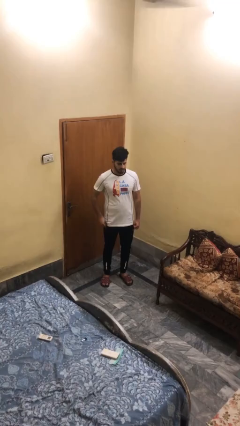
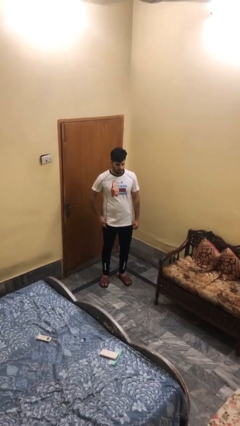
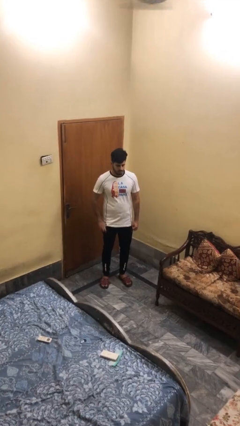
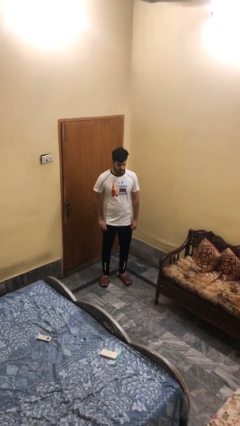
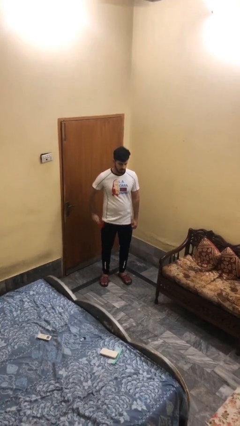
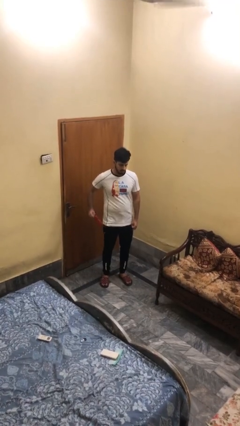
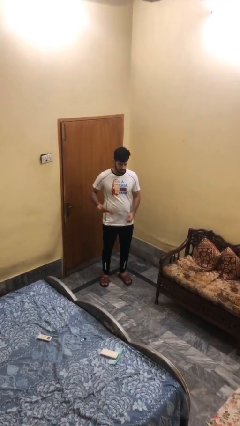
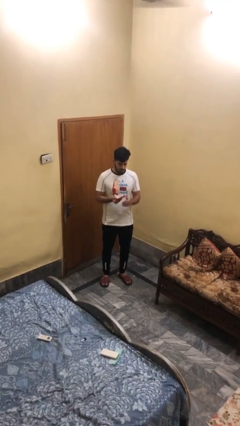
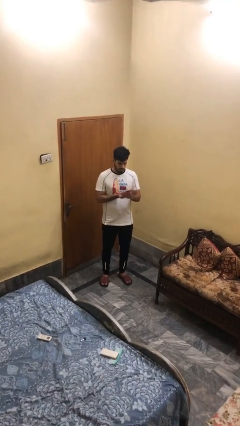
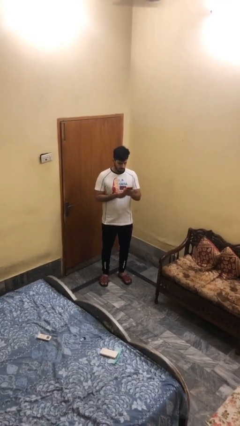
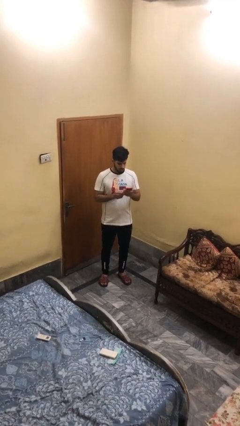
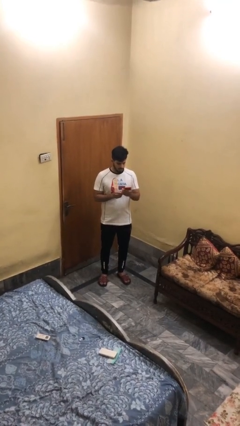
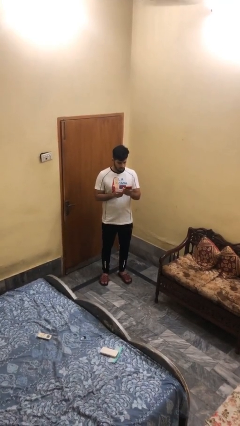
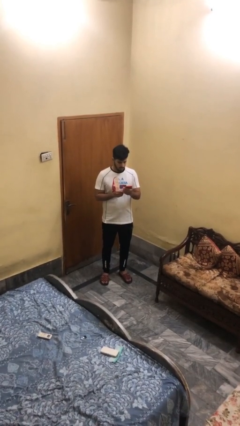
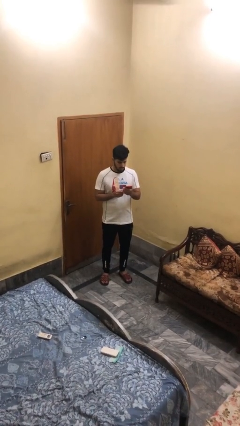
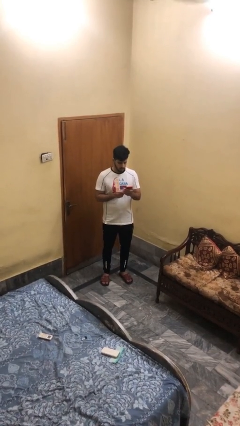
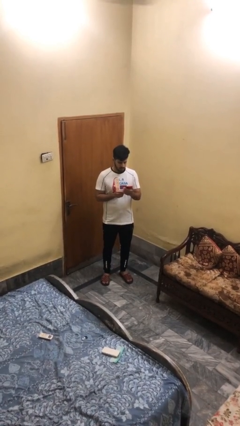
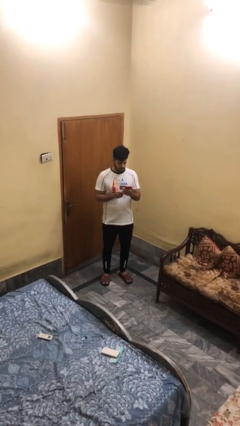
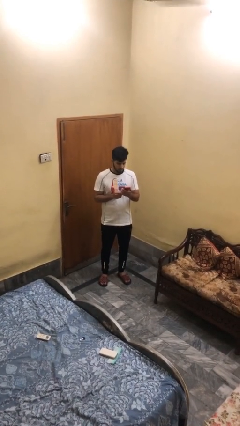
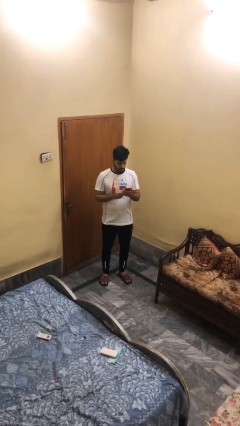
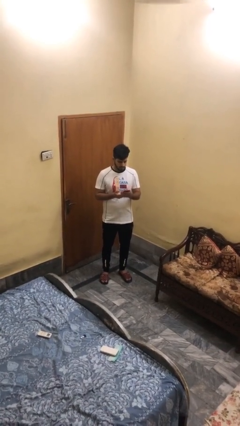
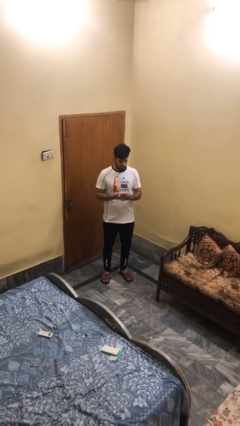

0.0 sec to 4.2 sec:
person takes phone from pocket

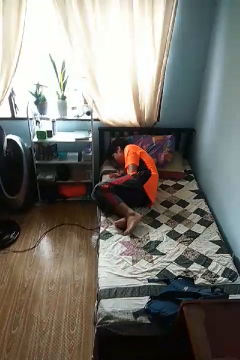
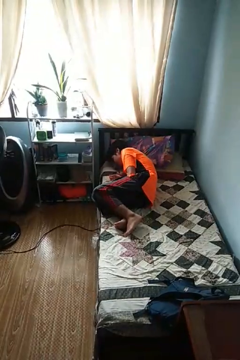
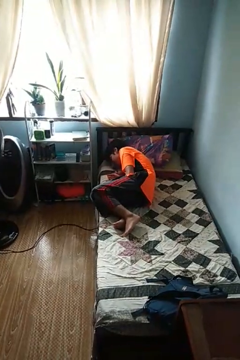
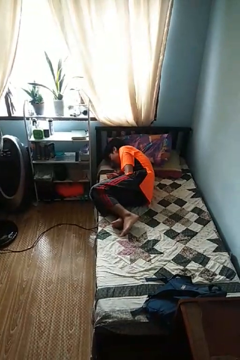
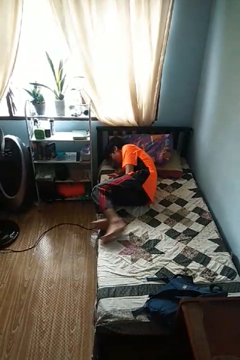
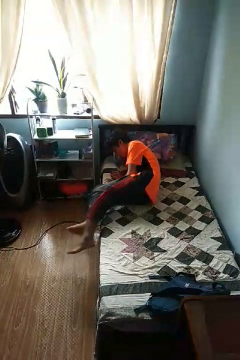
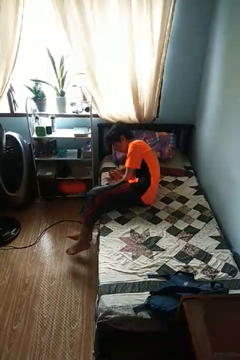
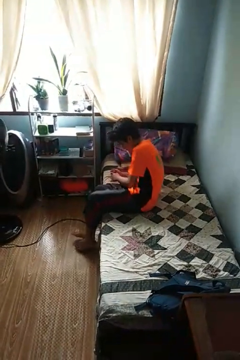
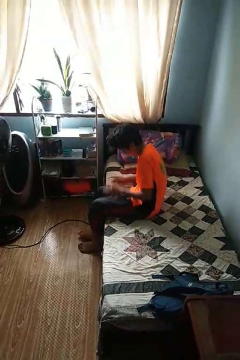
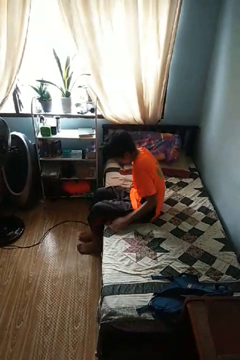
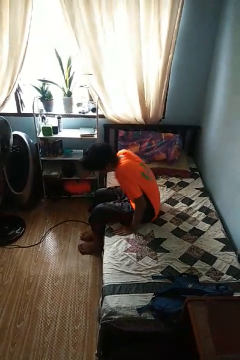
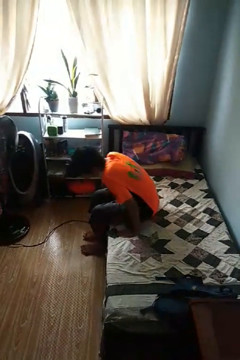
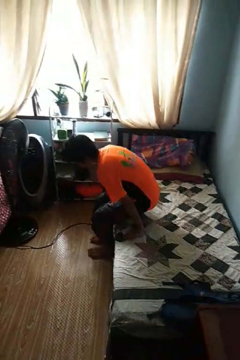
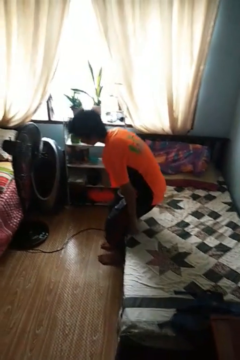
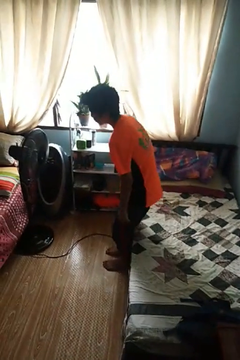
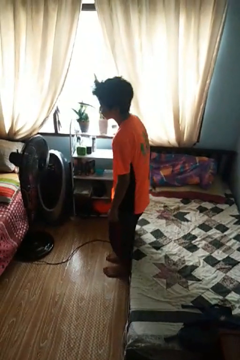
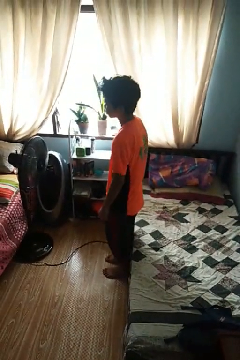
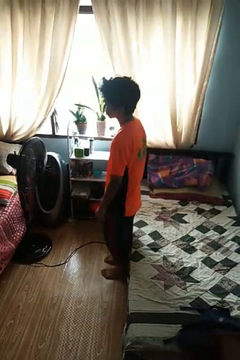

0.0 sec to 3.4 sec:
person stands up

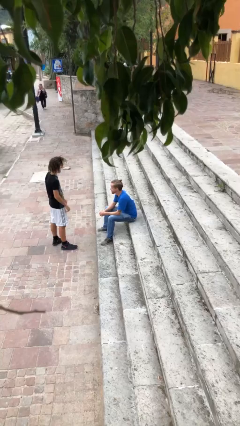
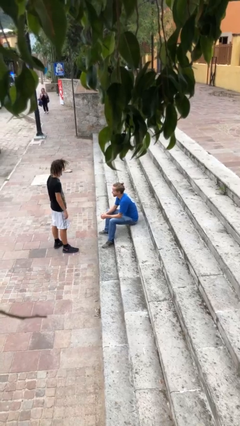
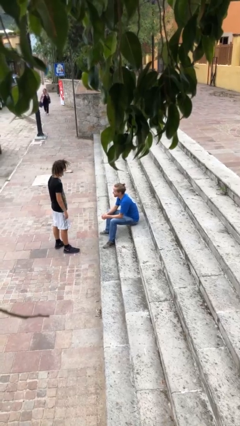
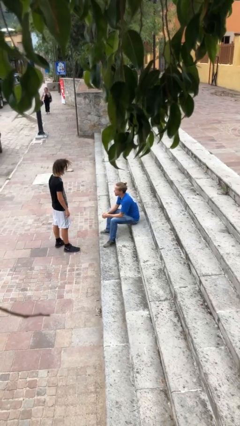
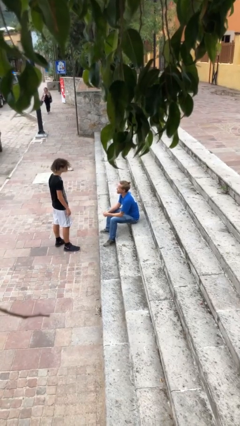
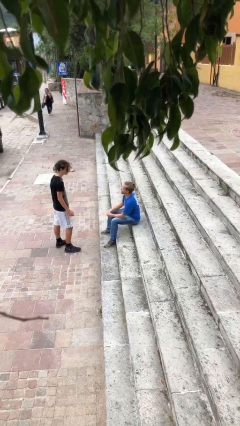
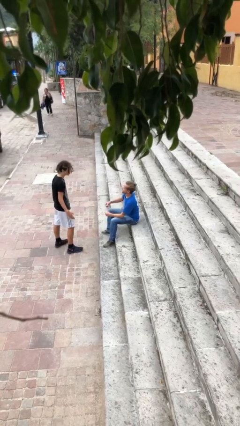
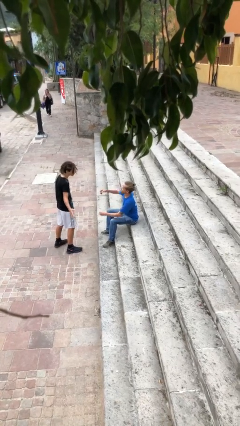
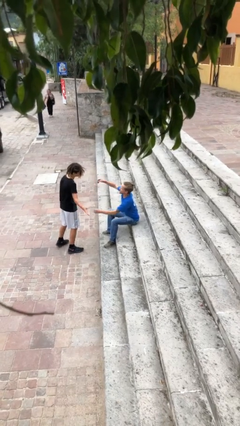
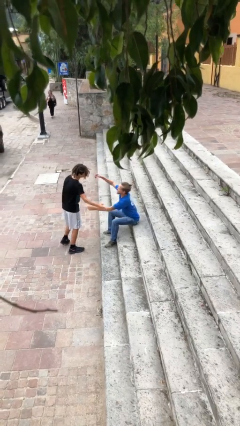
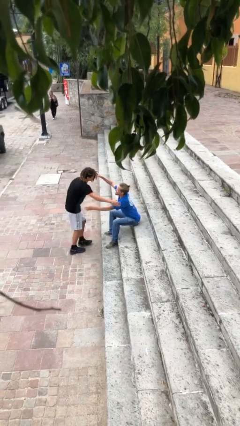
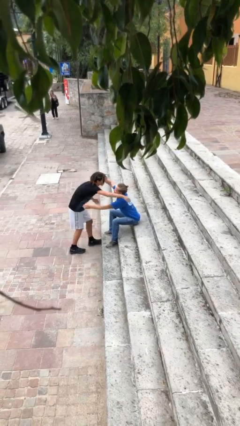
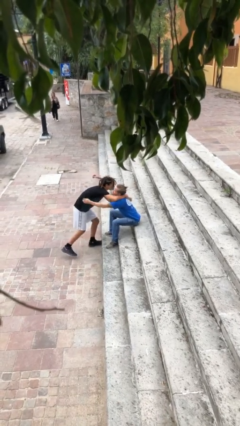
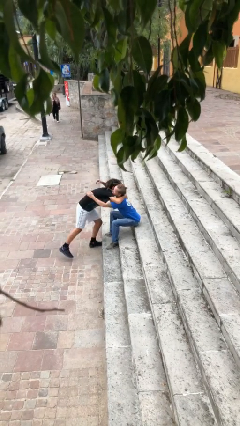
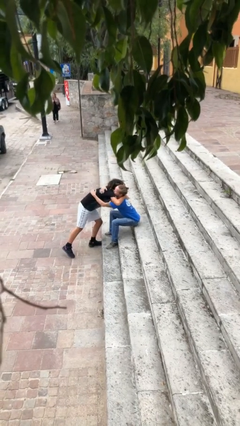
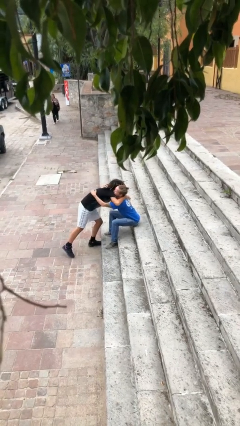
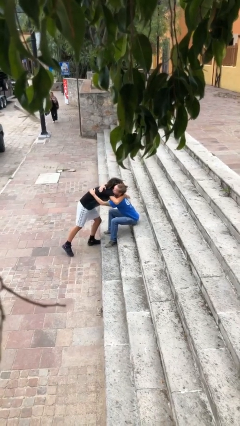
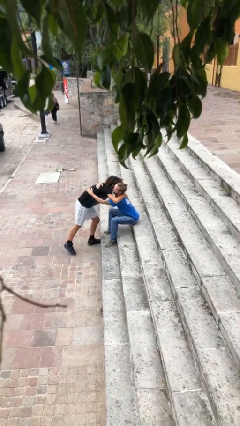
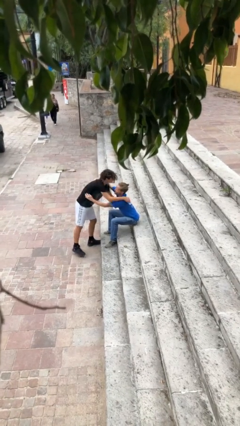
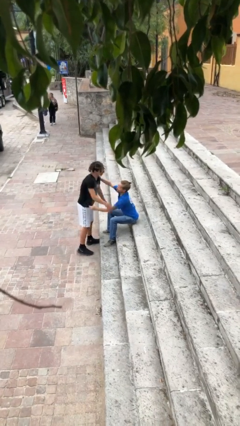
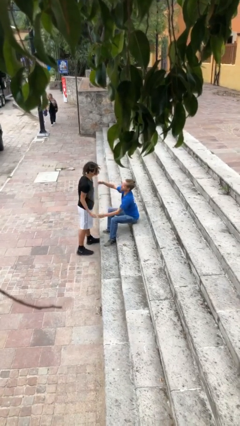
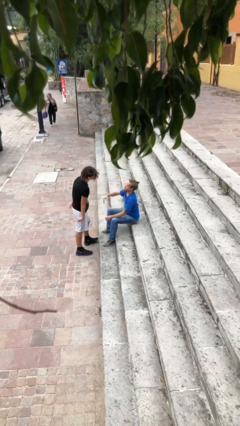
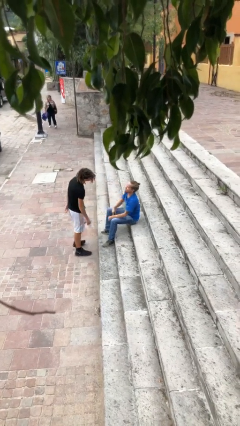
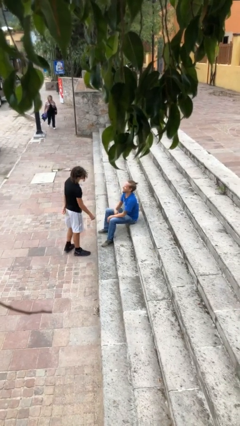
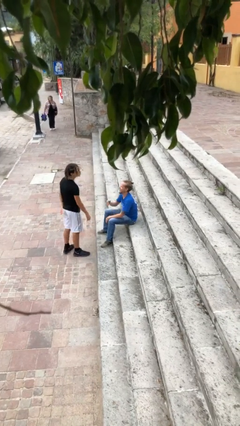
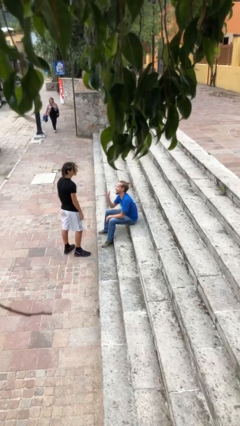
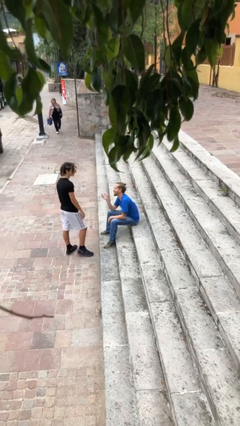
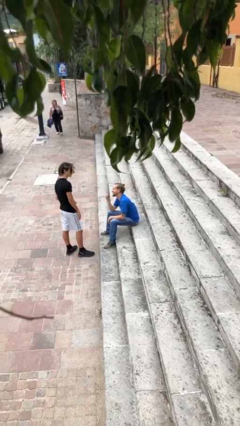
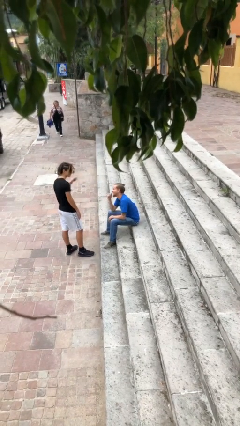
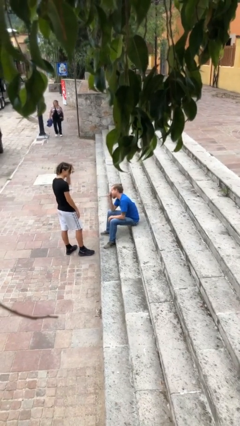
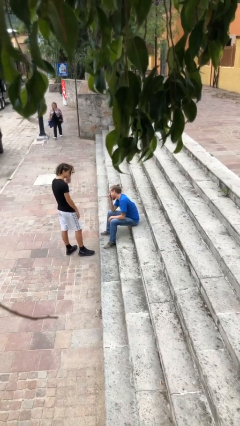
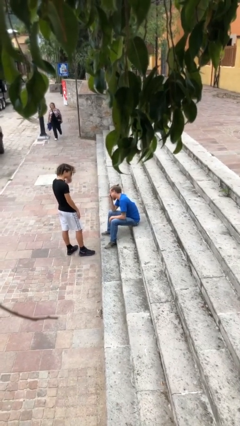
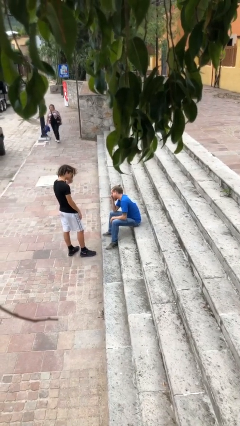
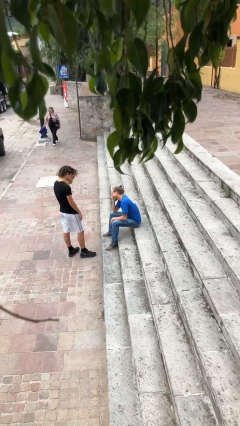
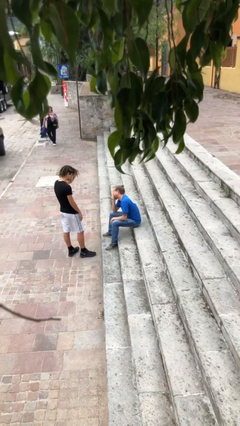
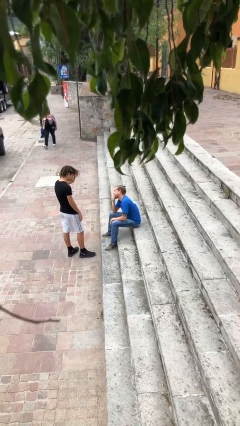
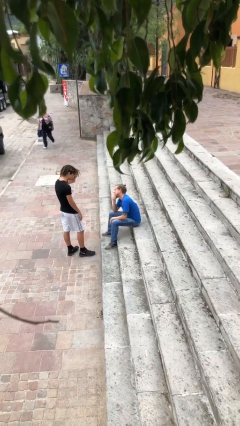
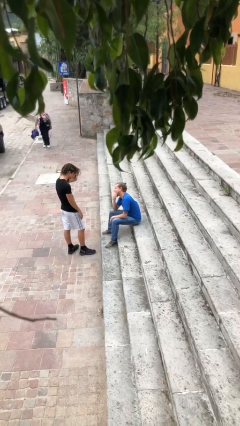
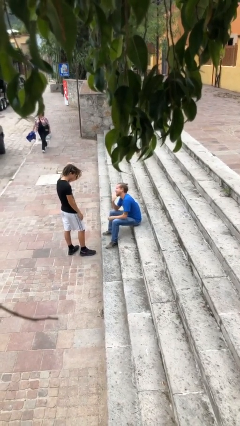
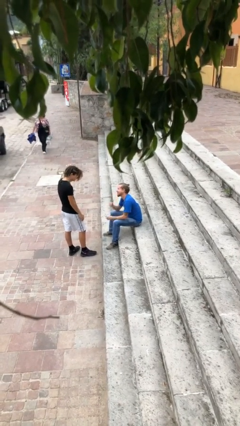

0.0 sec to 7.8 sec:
person embraces person

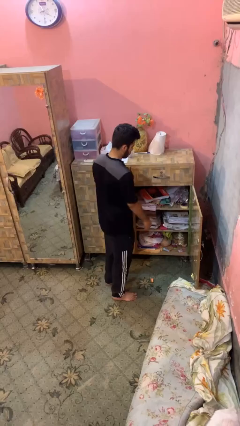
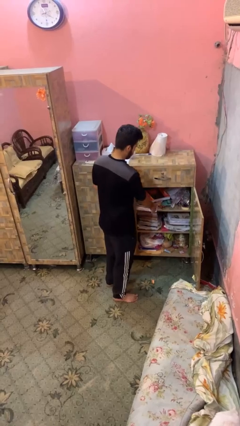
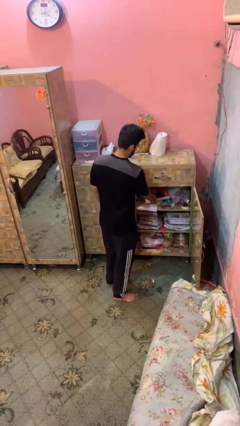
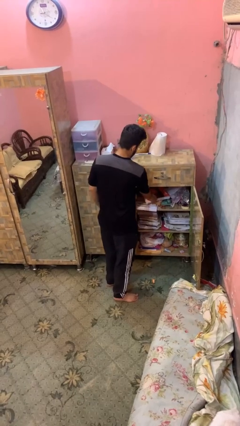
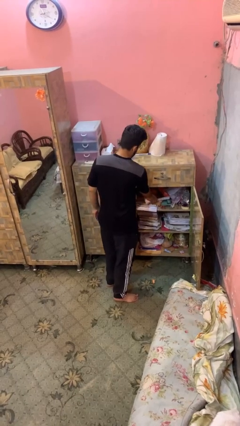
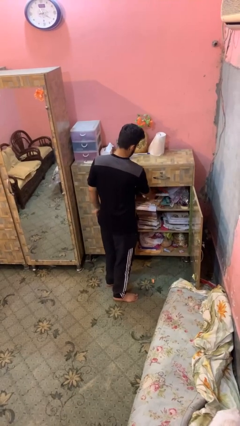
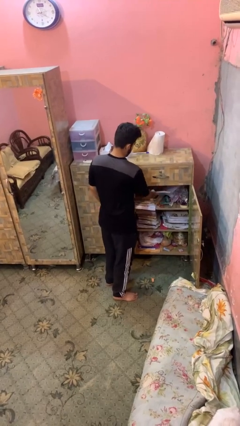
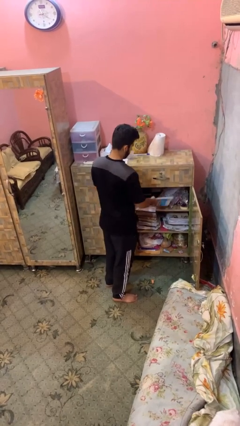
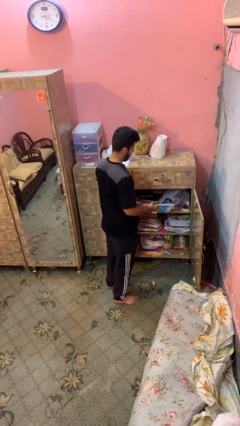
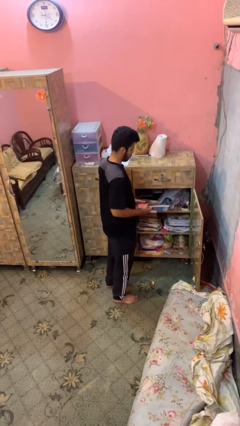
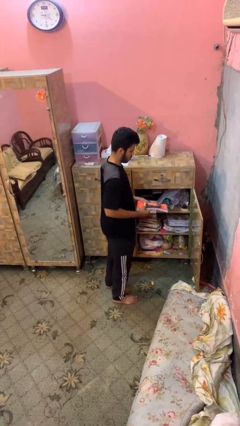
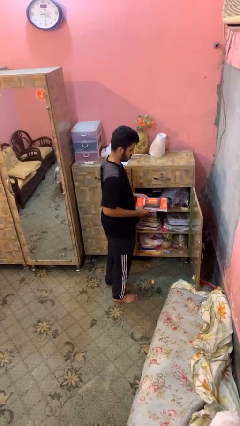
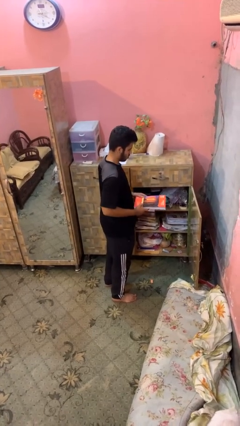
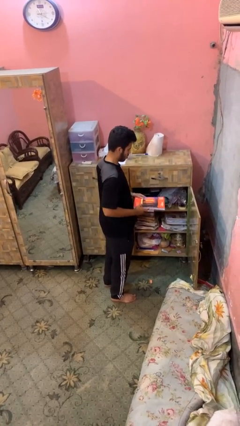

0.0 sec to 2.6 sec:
person picks up object from cabinet

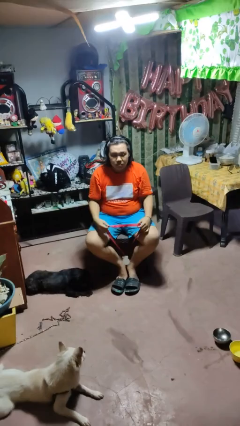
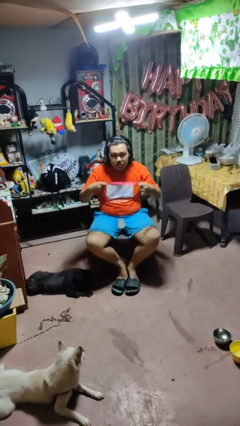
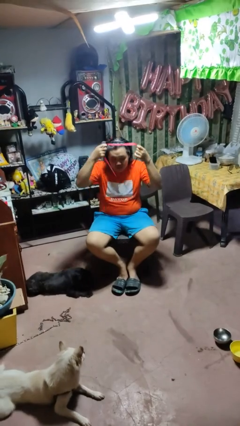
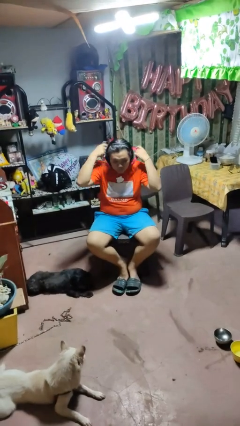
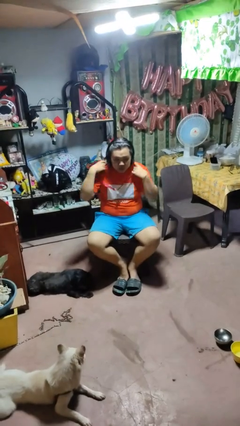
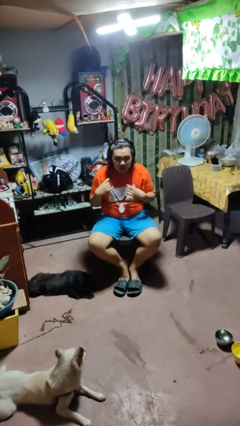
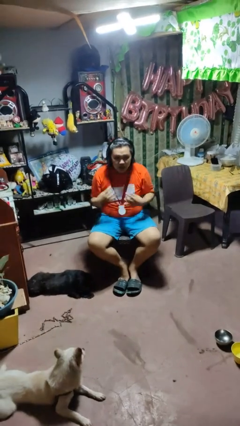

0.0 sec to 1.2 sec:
person puts on necklace
